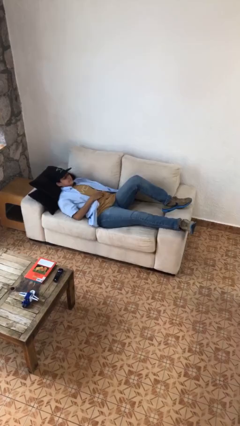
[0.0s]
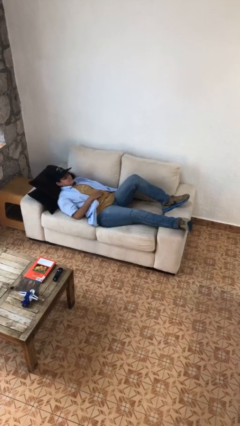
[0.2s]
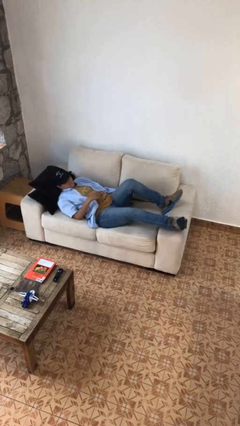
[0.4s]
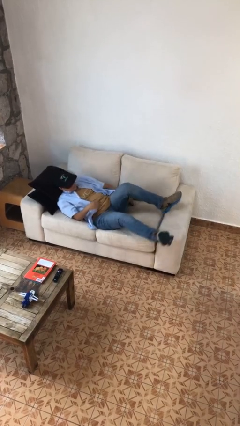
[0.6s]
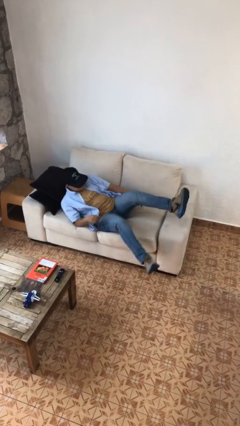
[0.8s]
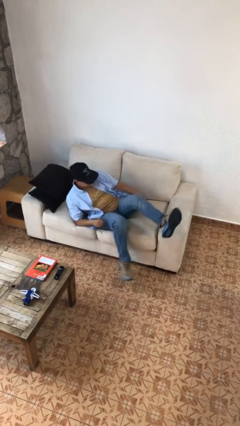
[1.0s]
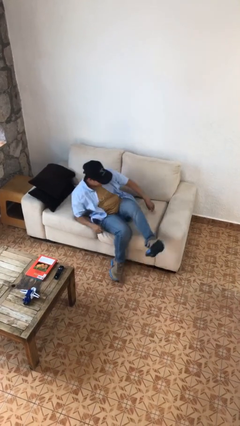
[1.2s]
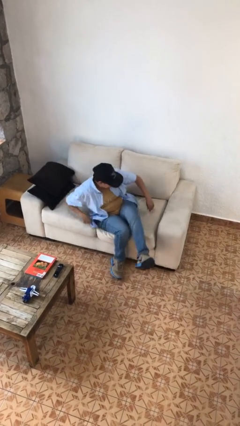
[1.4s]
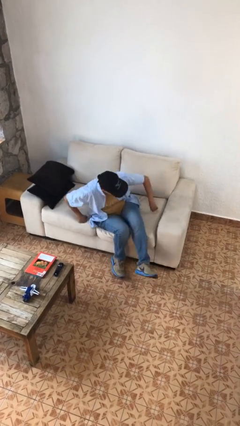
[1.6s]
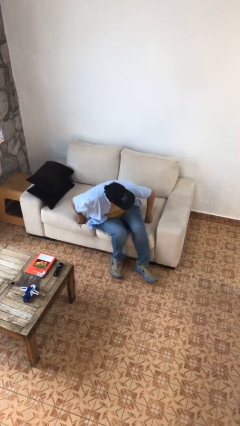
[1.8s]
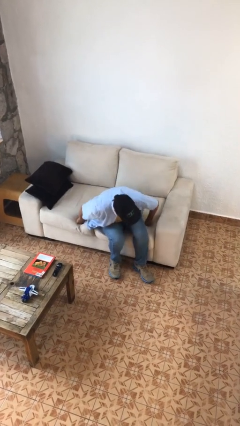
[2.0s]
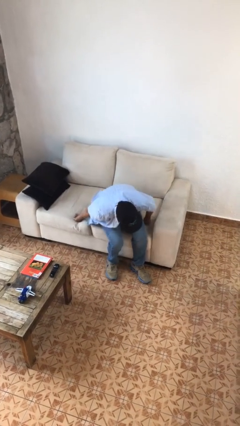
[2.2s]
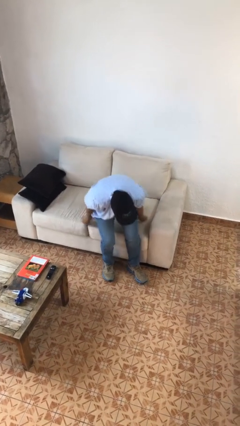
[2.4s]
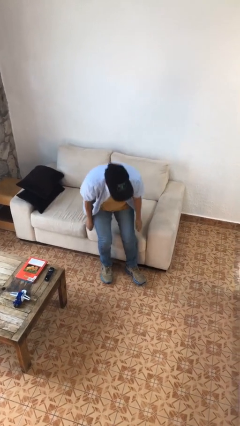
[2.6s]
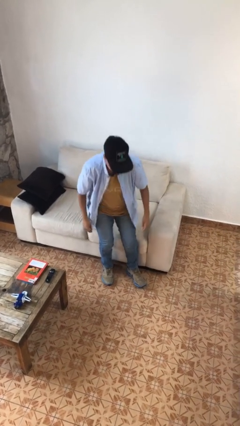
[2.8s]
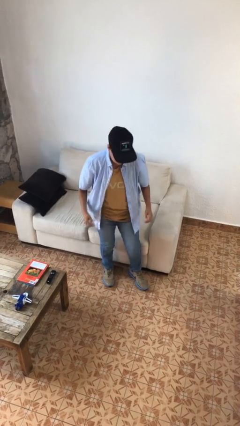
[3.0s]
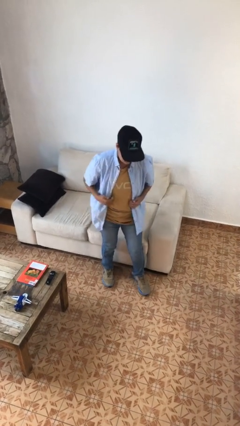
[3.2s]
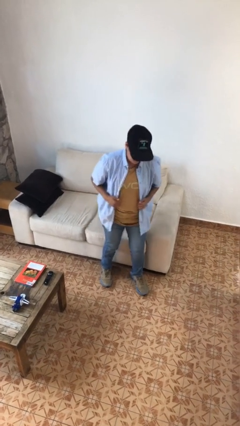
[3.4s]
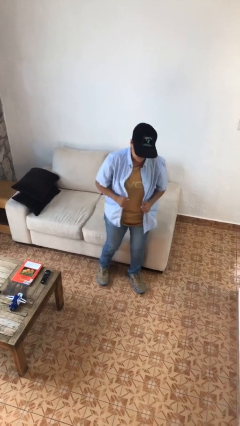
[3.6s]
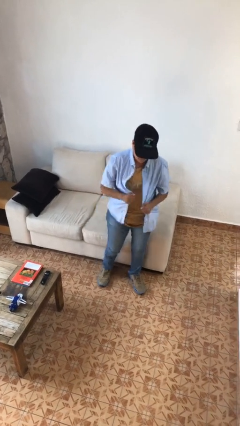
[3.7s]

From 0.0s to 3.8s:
person stands up

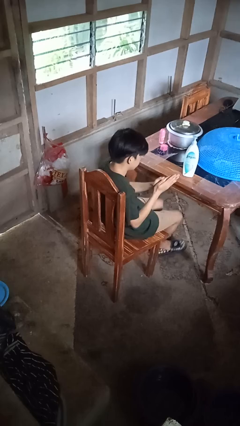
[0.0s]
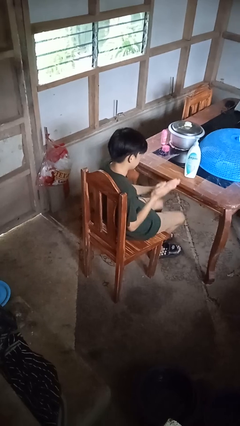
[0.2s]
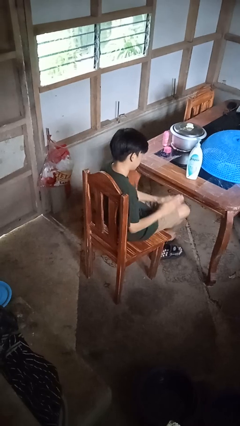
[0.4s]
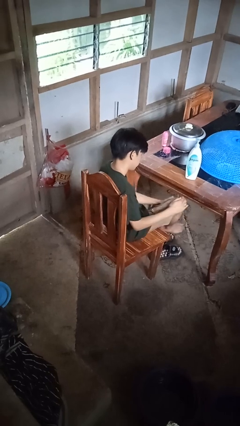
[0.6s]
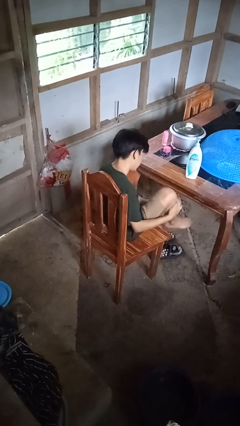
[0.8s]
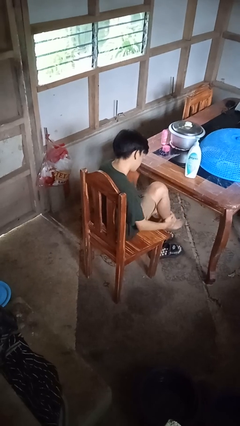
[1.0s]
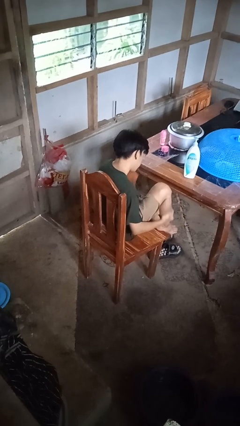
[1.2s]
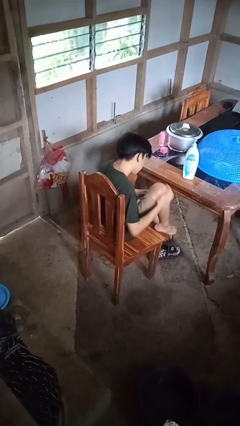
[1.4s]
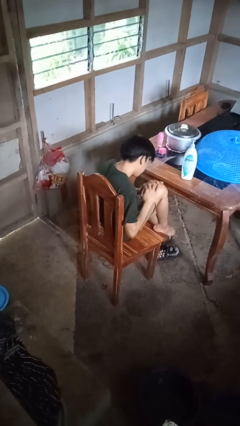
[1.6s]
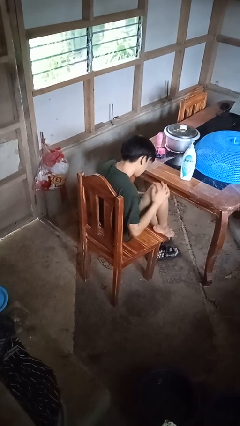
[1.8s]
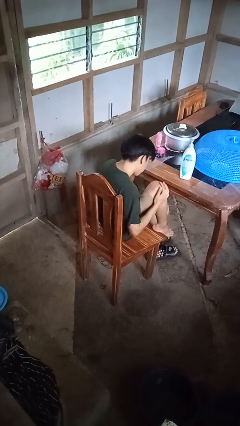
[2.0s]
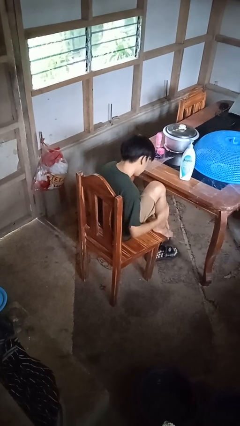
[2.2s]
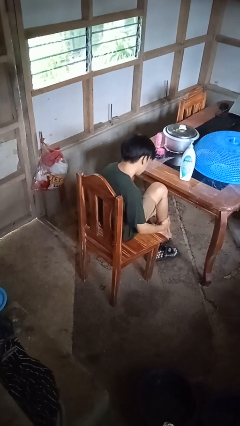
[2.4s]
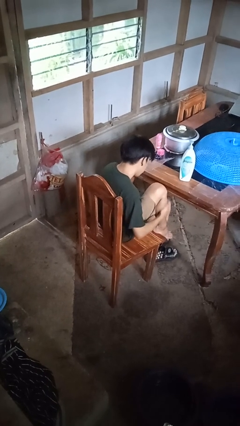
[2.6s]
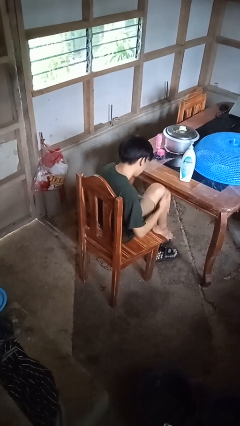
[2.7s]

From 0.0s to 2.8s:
person applies sunscreen

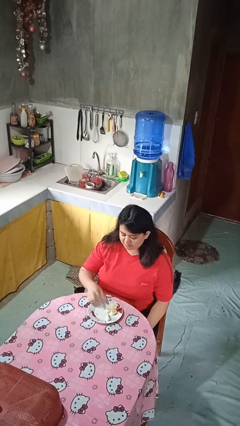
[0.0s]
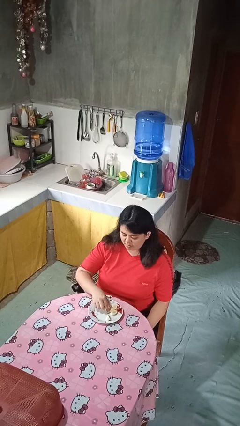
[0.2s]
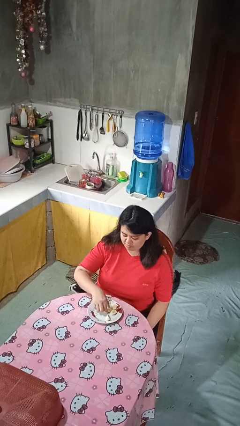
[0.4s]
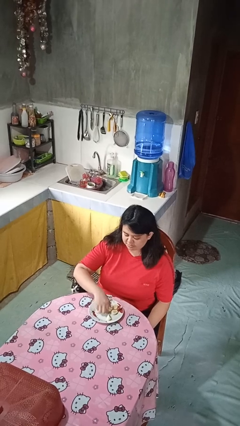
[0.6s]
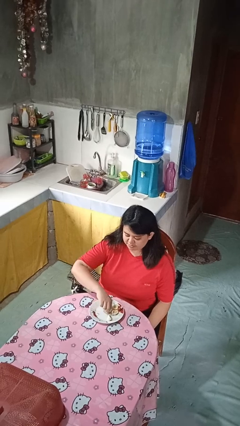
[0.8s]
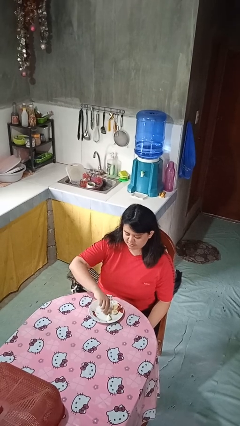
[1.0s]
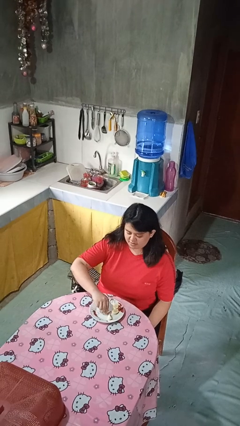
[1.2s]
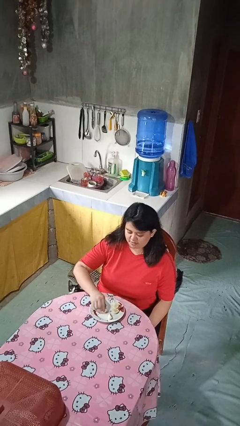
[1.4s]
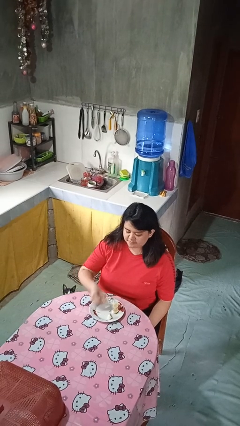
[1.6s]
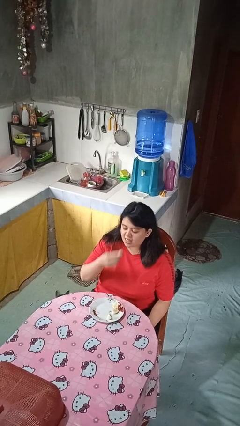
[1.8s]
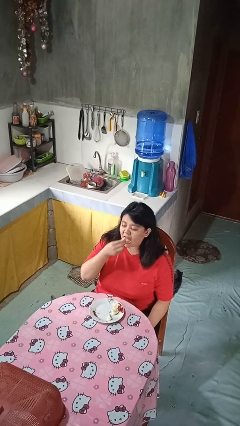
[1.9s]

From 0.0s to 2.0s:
person eats with hands

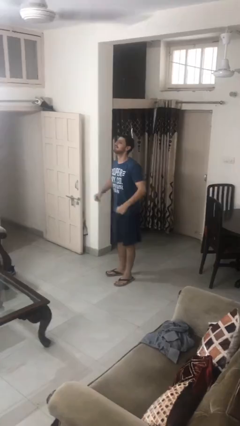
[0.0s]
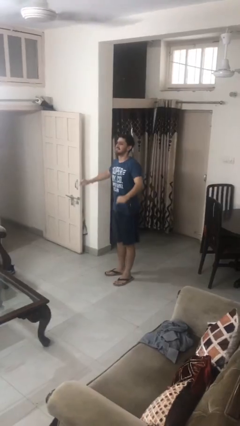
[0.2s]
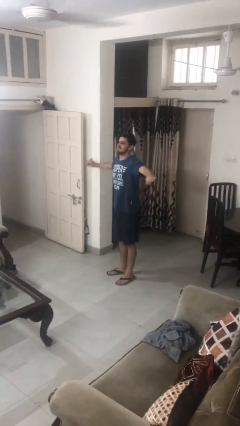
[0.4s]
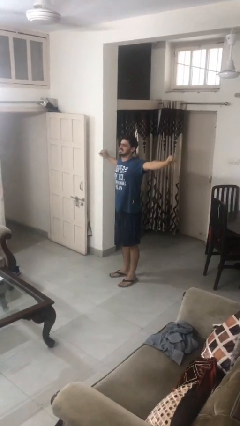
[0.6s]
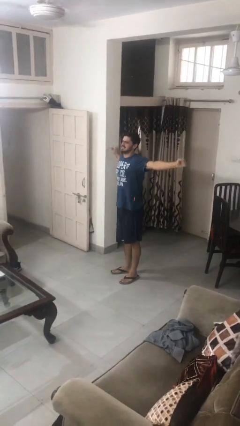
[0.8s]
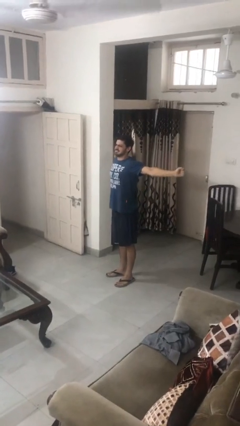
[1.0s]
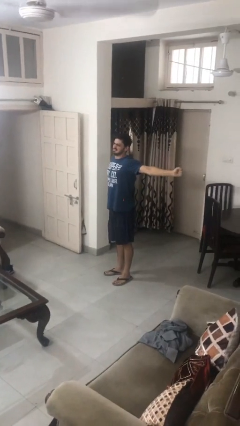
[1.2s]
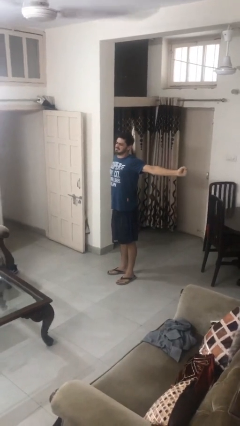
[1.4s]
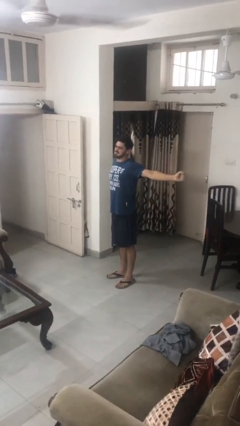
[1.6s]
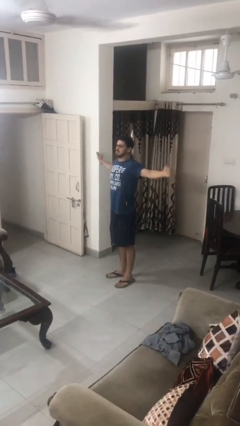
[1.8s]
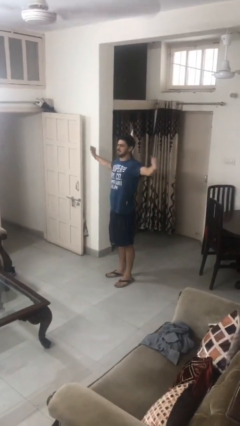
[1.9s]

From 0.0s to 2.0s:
person stretches arms to side

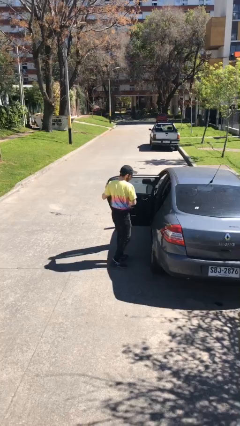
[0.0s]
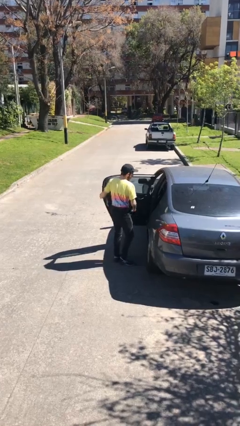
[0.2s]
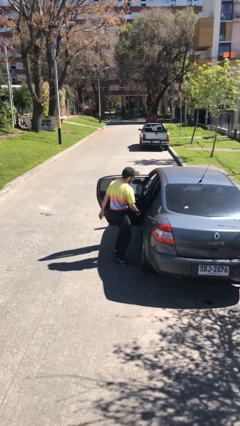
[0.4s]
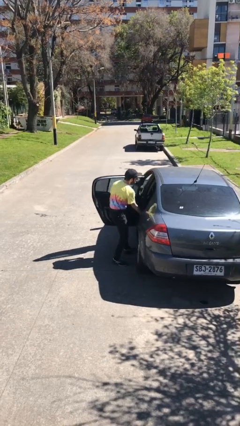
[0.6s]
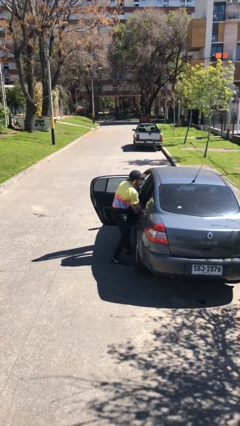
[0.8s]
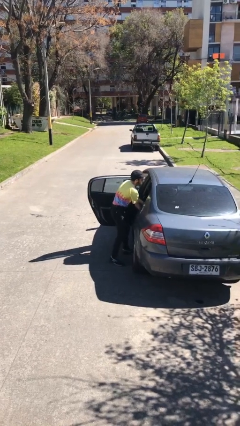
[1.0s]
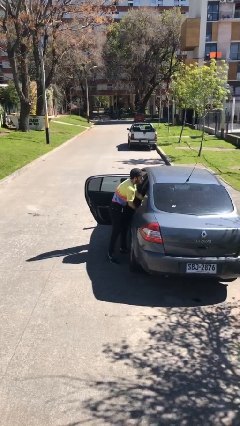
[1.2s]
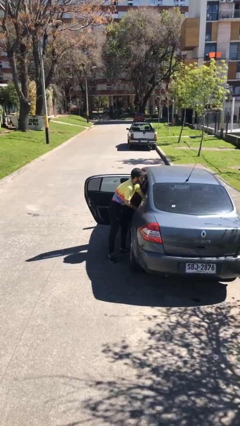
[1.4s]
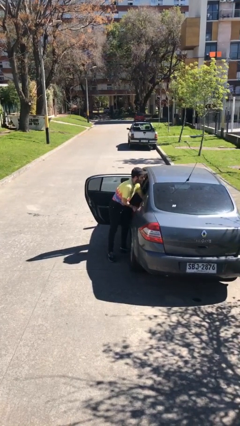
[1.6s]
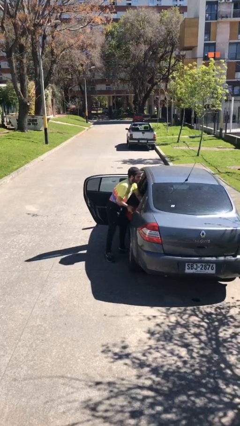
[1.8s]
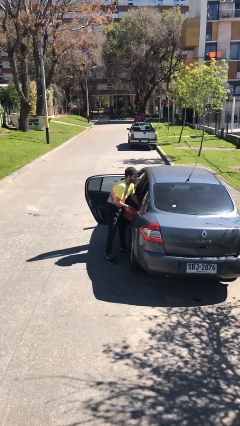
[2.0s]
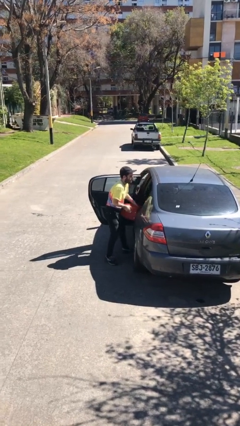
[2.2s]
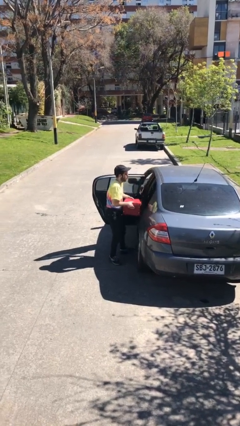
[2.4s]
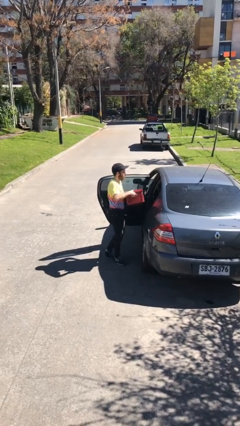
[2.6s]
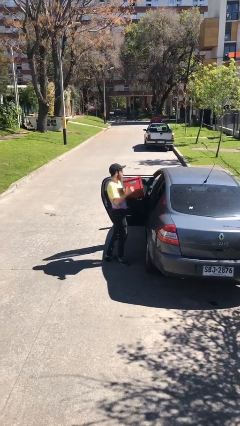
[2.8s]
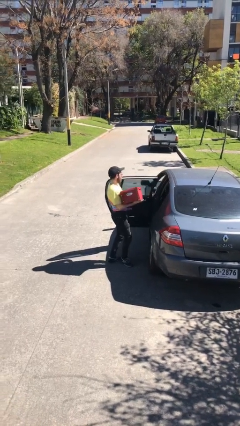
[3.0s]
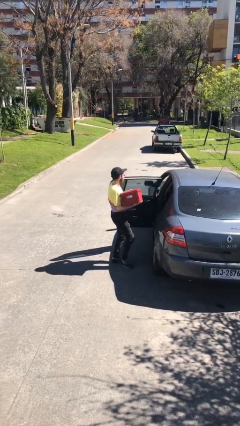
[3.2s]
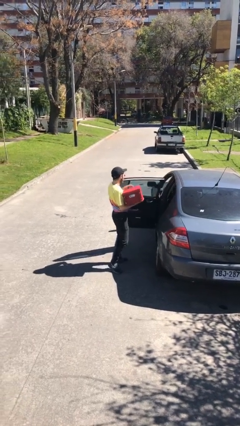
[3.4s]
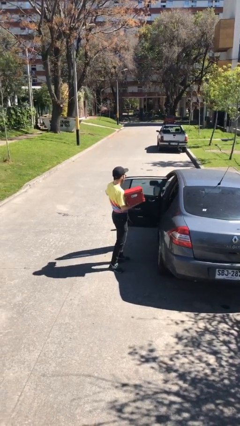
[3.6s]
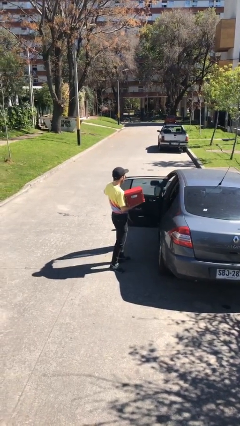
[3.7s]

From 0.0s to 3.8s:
person unloads car

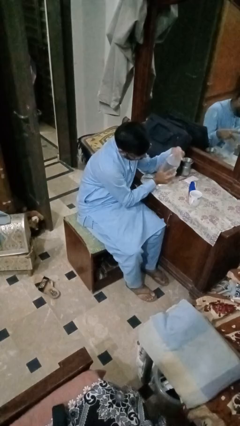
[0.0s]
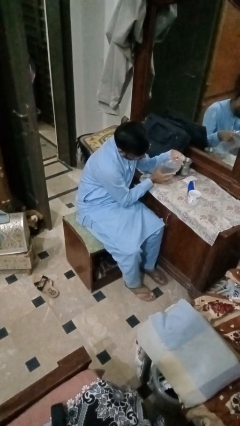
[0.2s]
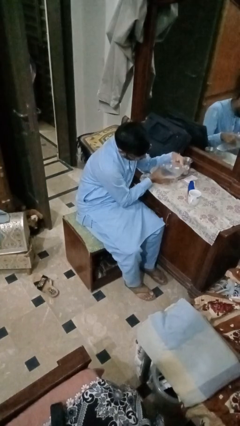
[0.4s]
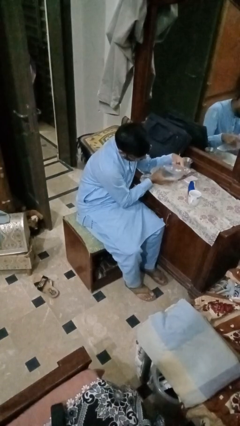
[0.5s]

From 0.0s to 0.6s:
person pours liquid into cup

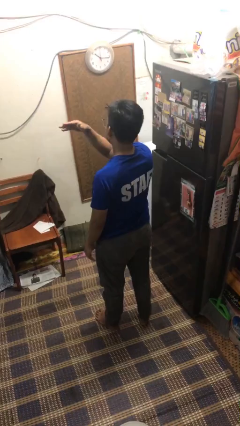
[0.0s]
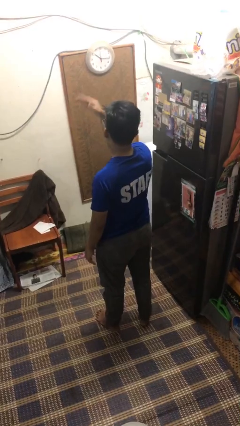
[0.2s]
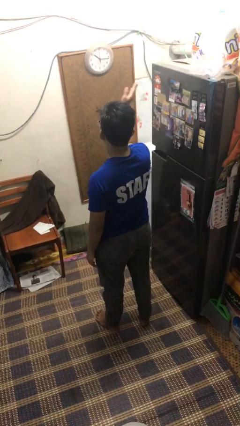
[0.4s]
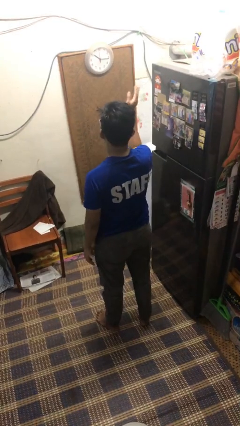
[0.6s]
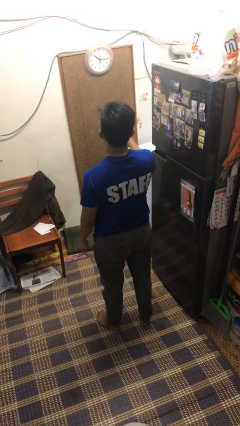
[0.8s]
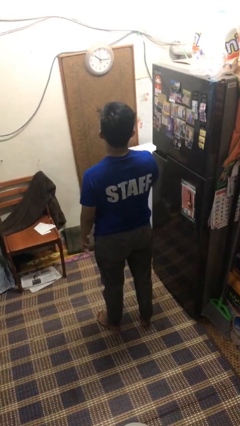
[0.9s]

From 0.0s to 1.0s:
person gestures swipe right

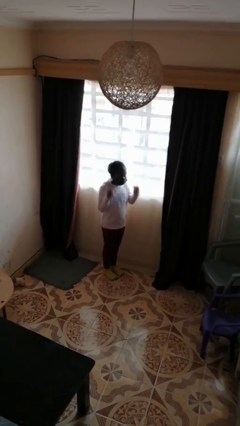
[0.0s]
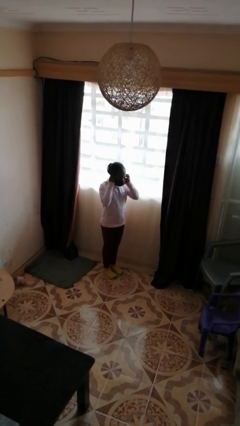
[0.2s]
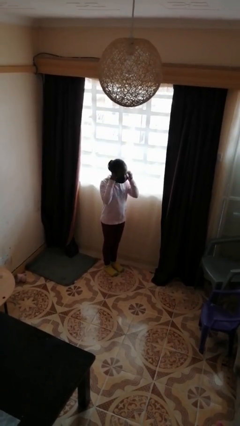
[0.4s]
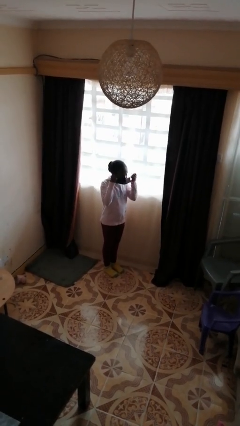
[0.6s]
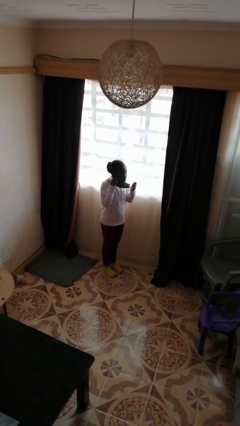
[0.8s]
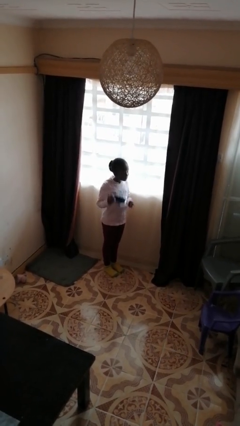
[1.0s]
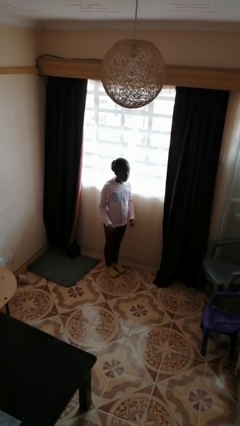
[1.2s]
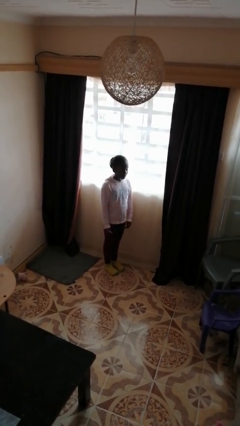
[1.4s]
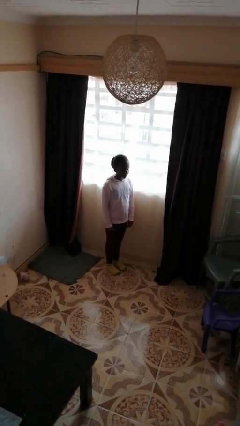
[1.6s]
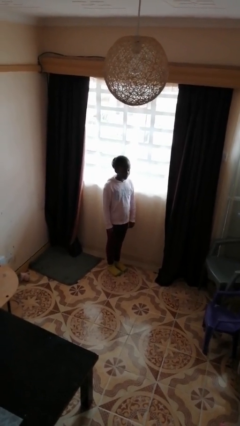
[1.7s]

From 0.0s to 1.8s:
person takes off facemask
